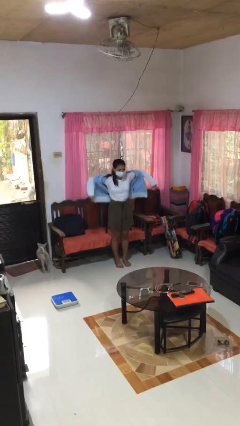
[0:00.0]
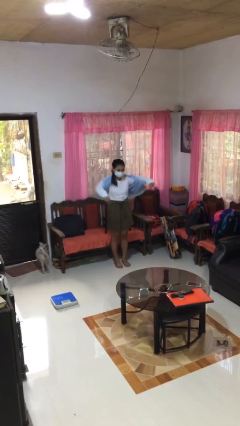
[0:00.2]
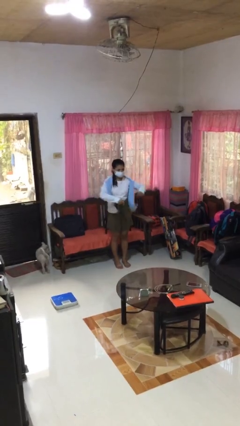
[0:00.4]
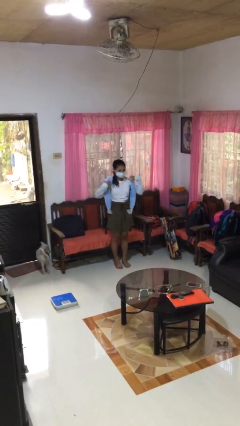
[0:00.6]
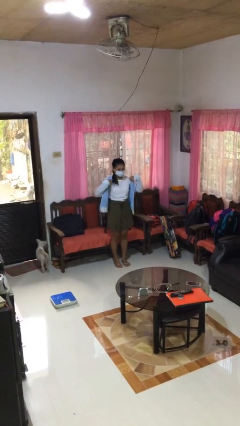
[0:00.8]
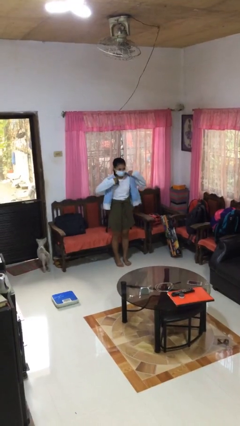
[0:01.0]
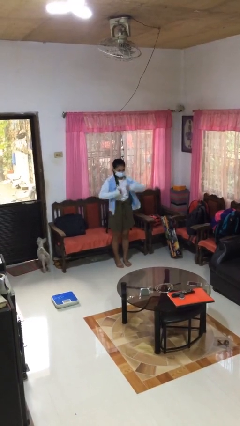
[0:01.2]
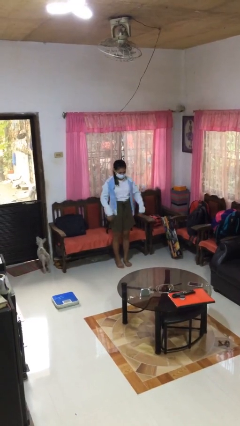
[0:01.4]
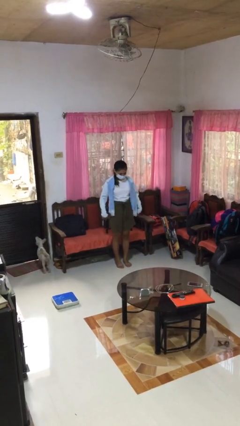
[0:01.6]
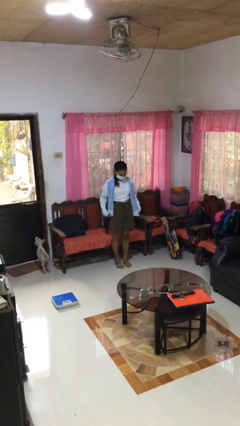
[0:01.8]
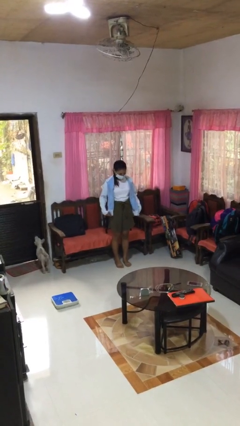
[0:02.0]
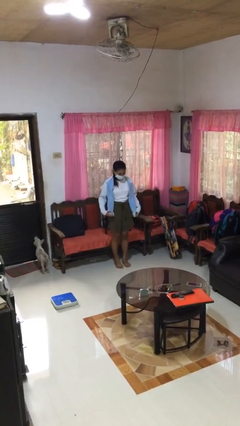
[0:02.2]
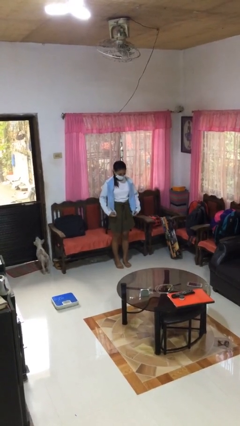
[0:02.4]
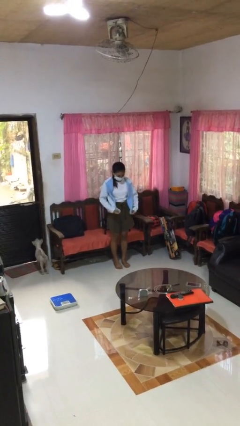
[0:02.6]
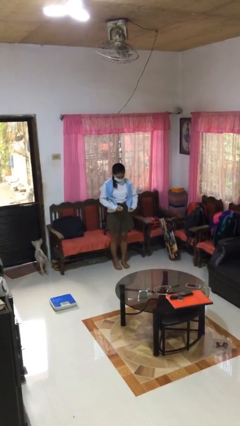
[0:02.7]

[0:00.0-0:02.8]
person puts on jacket

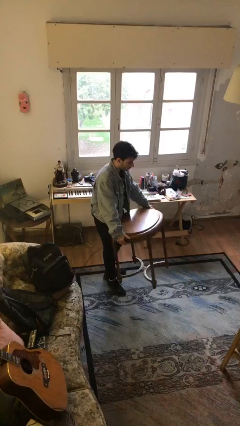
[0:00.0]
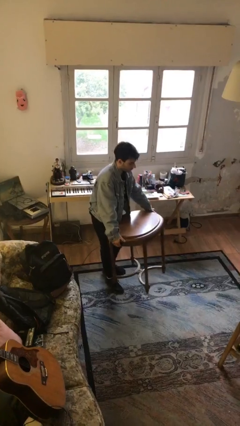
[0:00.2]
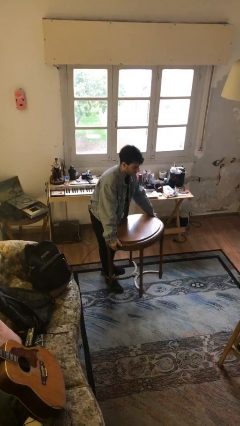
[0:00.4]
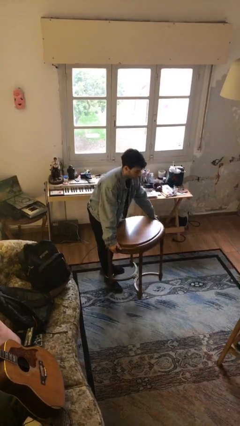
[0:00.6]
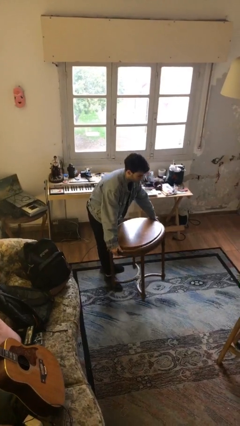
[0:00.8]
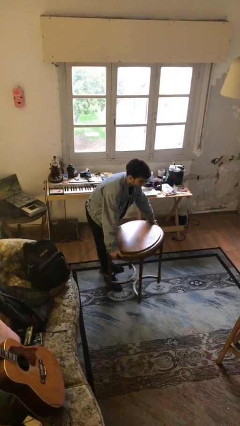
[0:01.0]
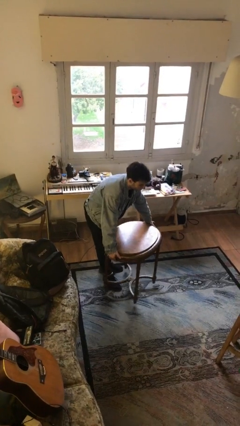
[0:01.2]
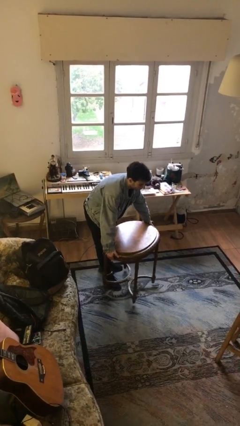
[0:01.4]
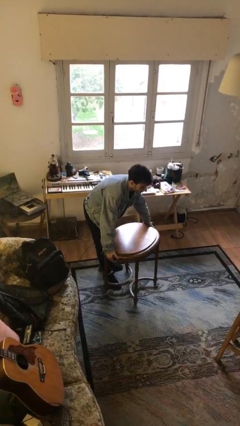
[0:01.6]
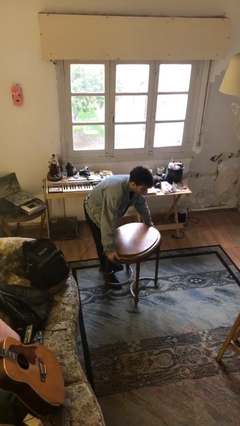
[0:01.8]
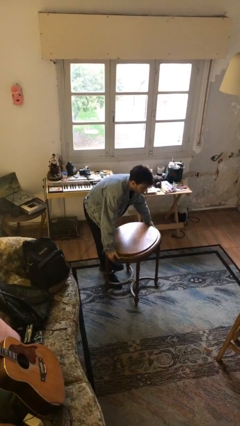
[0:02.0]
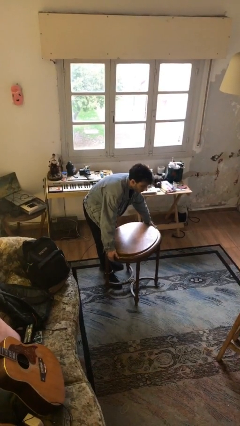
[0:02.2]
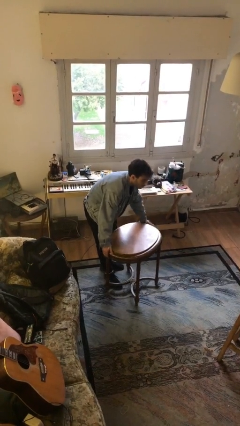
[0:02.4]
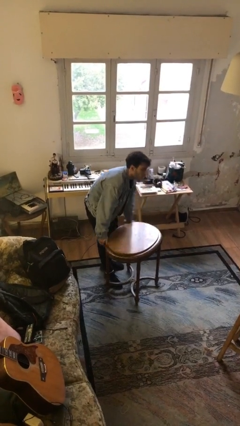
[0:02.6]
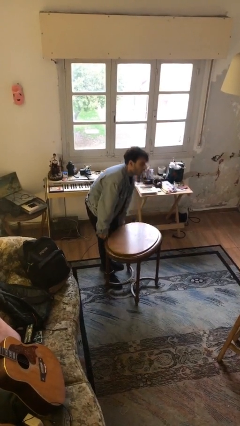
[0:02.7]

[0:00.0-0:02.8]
person puts down object on floor

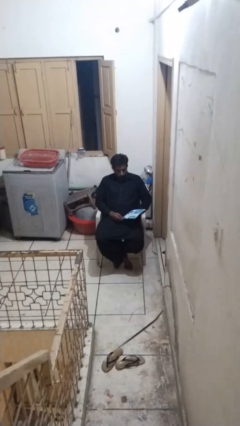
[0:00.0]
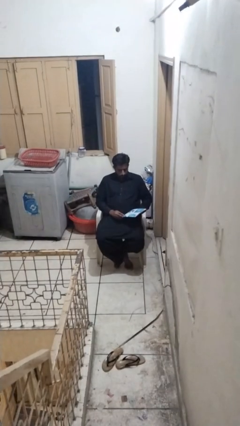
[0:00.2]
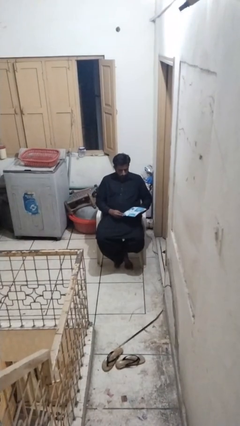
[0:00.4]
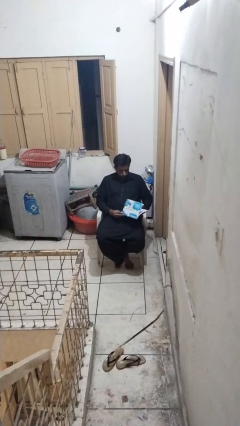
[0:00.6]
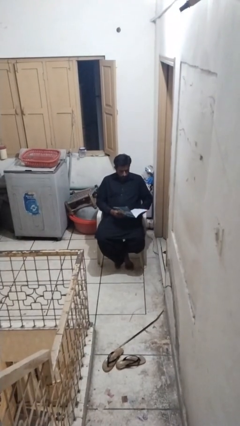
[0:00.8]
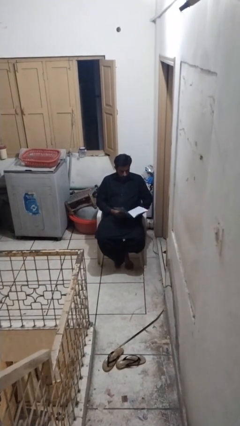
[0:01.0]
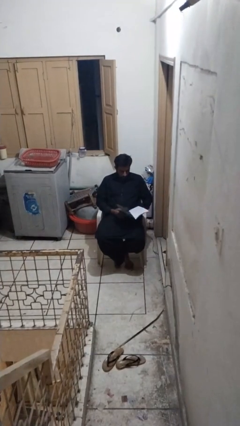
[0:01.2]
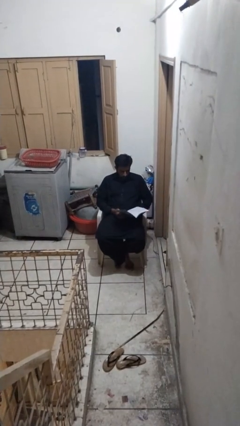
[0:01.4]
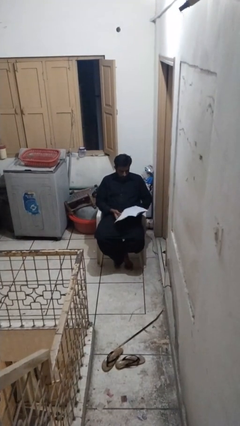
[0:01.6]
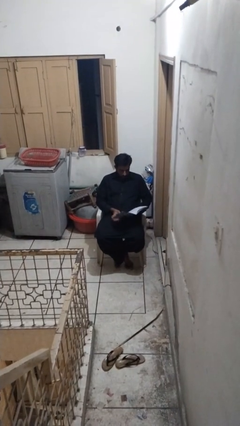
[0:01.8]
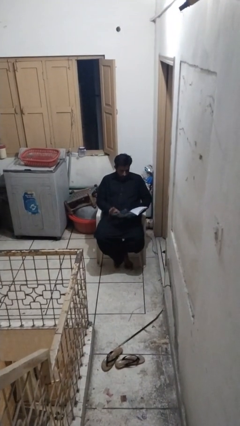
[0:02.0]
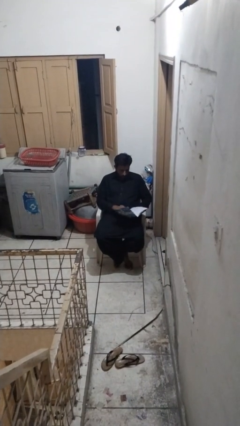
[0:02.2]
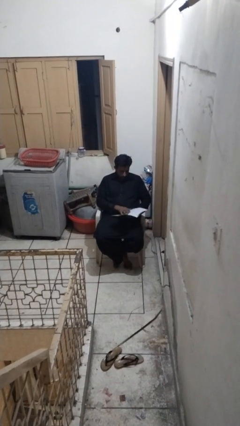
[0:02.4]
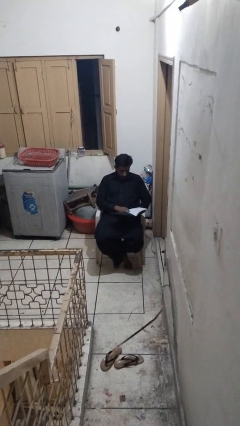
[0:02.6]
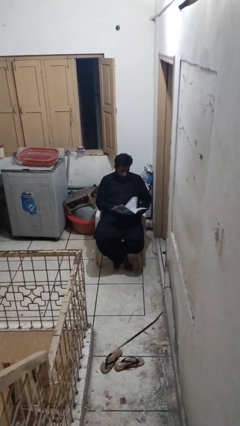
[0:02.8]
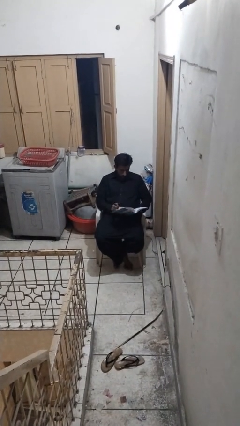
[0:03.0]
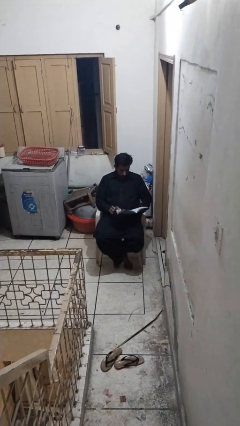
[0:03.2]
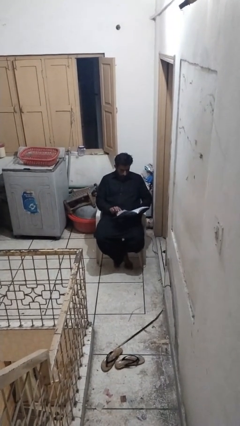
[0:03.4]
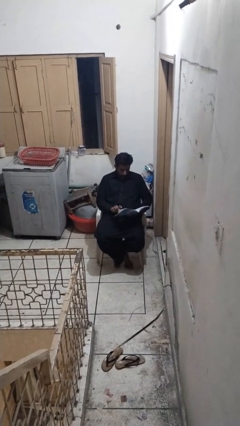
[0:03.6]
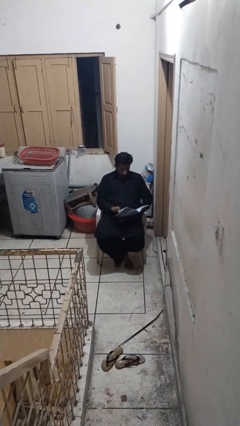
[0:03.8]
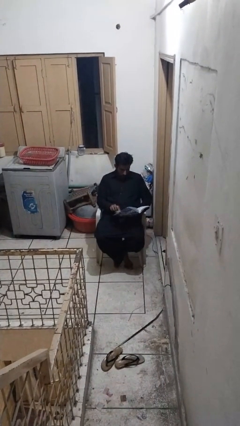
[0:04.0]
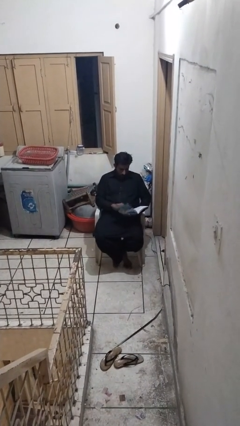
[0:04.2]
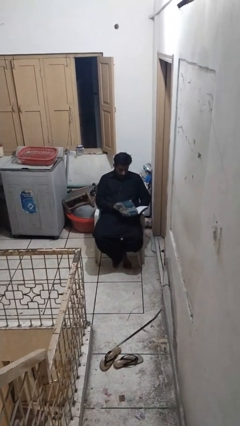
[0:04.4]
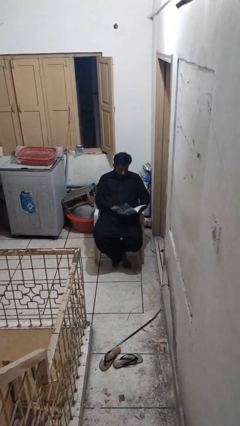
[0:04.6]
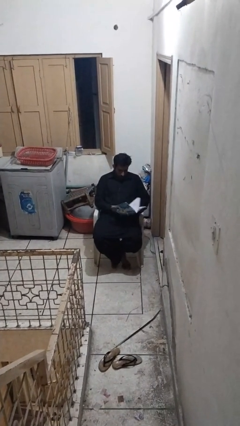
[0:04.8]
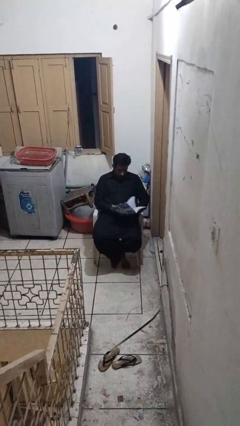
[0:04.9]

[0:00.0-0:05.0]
person reads book

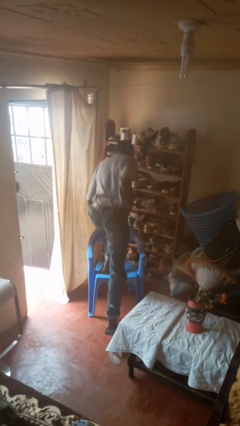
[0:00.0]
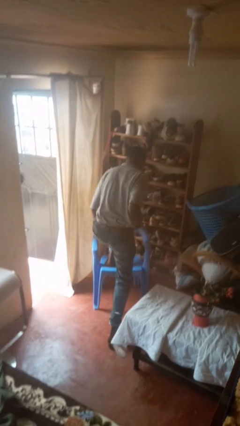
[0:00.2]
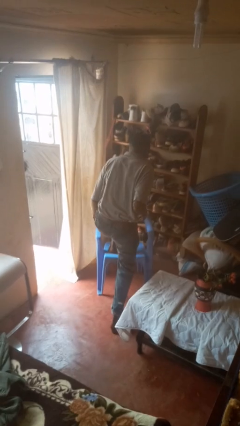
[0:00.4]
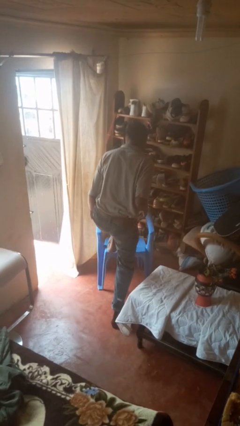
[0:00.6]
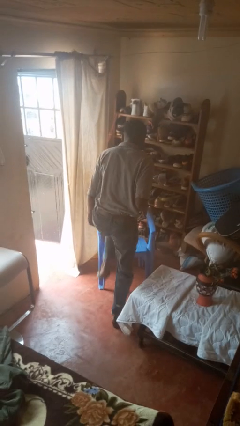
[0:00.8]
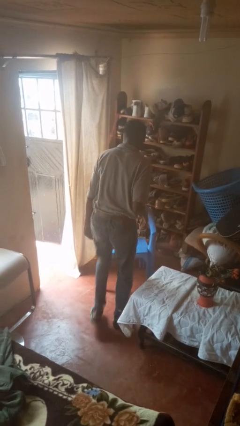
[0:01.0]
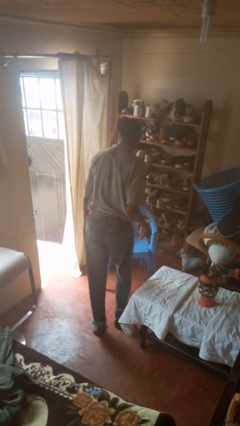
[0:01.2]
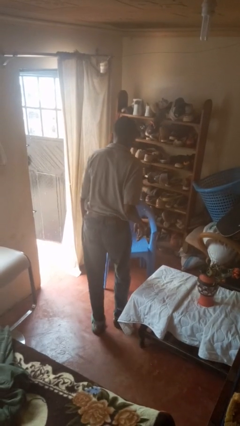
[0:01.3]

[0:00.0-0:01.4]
person climbs off chair

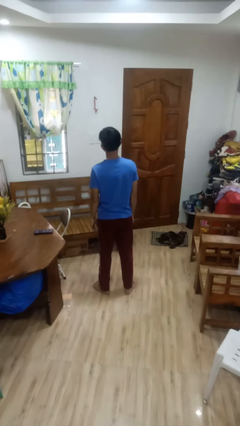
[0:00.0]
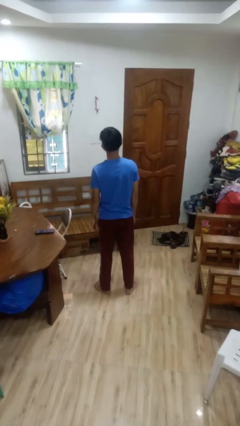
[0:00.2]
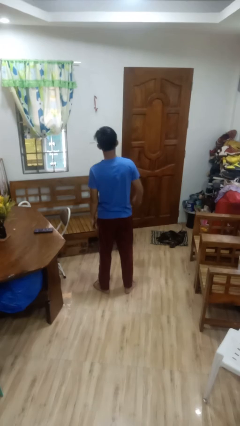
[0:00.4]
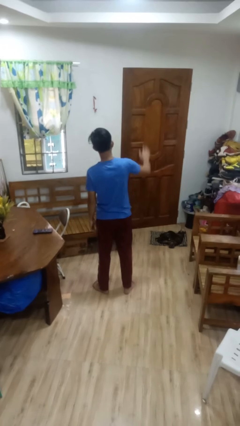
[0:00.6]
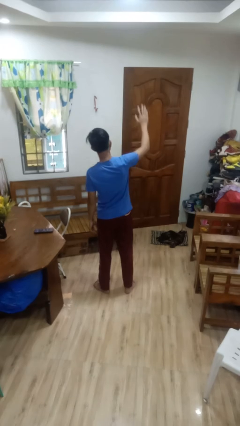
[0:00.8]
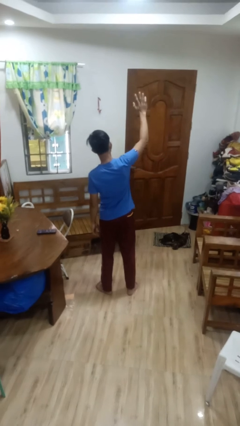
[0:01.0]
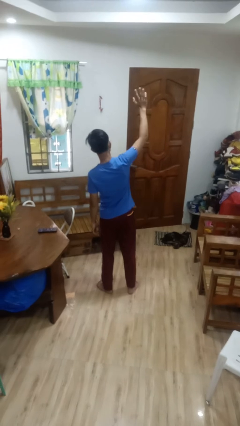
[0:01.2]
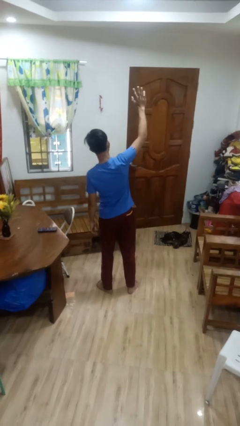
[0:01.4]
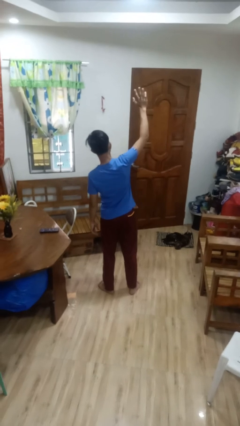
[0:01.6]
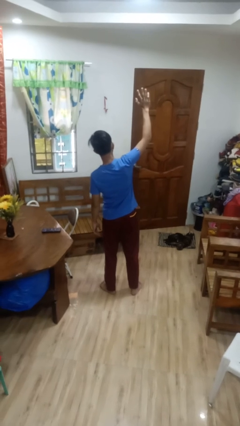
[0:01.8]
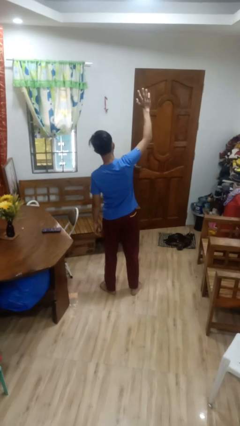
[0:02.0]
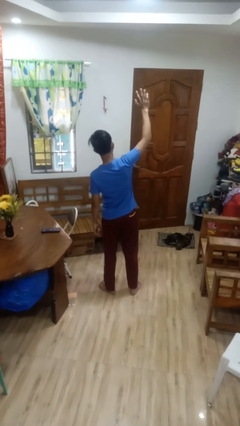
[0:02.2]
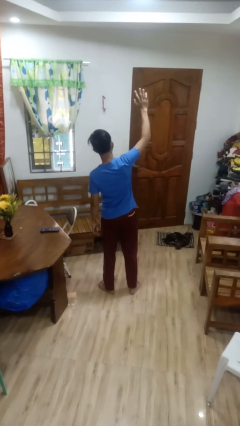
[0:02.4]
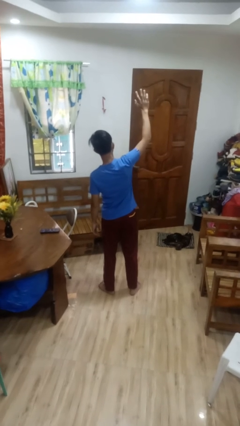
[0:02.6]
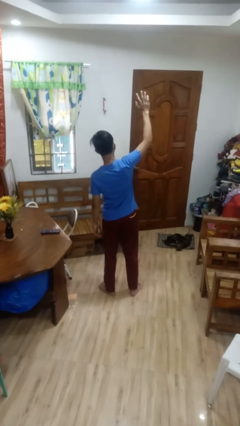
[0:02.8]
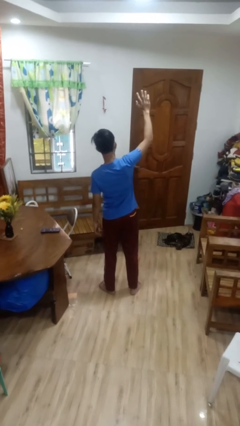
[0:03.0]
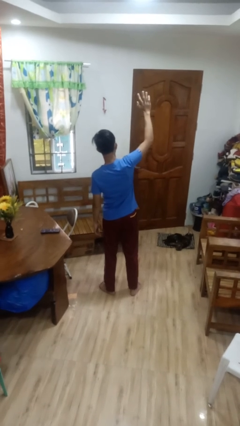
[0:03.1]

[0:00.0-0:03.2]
person gestures raise hand

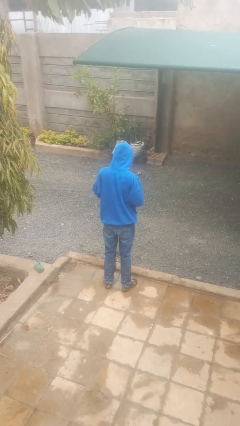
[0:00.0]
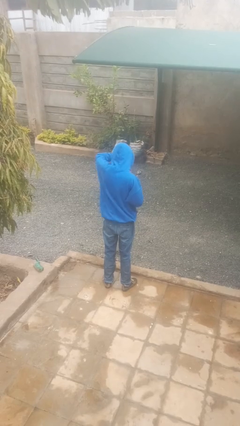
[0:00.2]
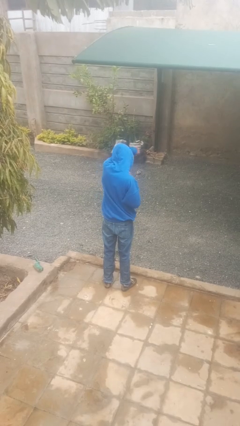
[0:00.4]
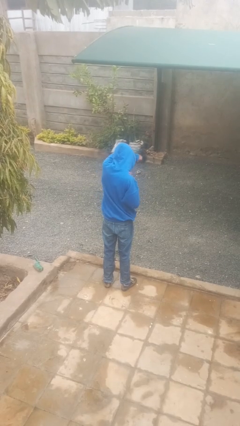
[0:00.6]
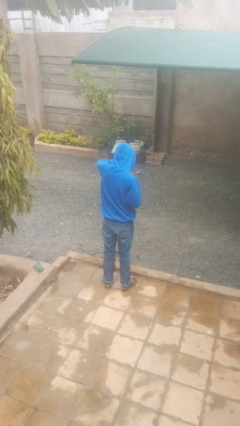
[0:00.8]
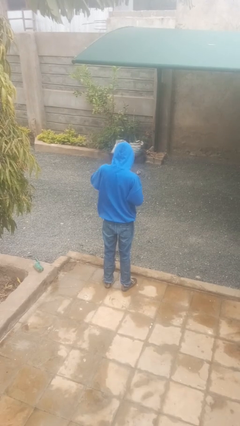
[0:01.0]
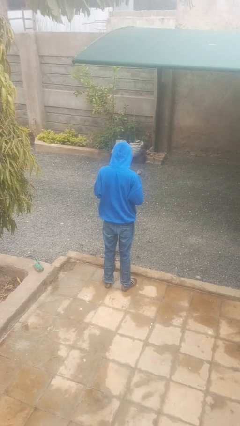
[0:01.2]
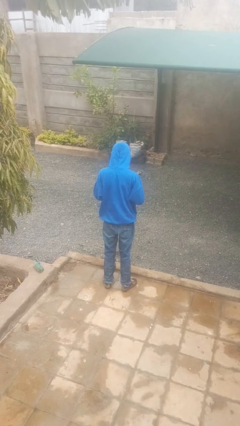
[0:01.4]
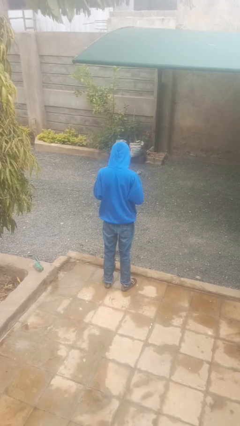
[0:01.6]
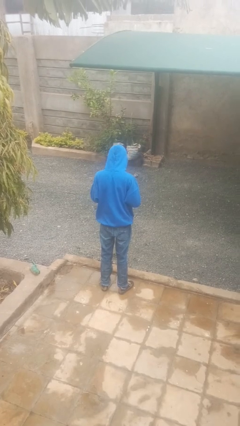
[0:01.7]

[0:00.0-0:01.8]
person punches

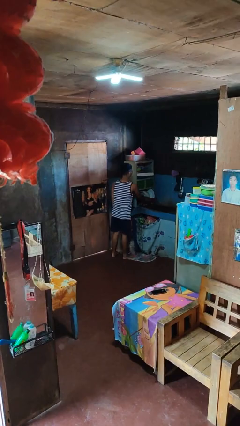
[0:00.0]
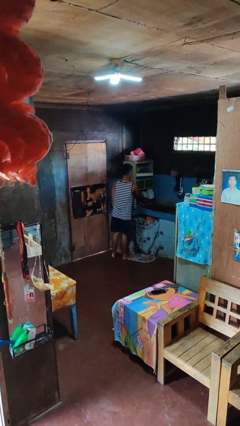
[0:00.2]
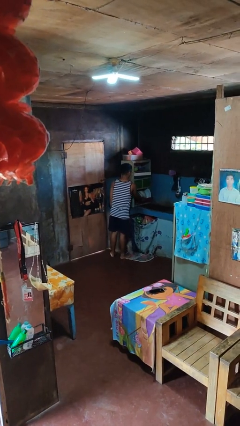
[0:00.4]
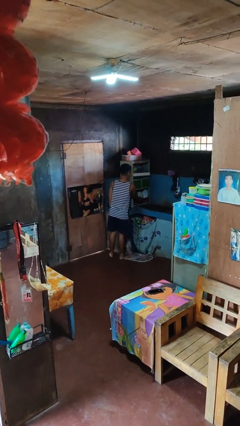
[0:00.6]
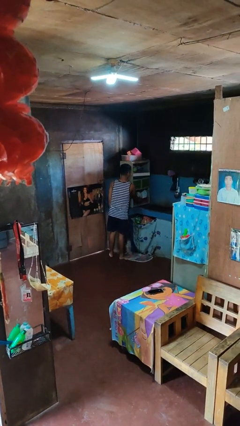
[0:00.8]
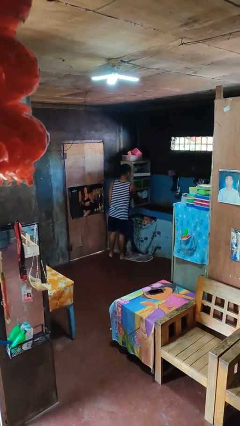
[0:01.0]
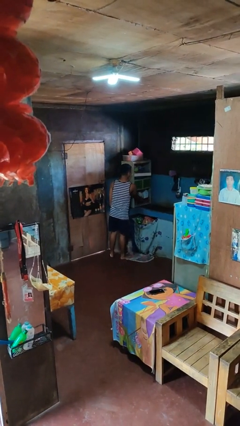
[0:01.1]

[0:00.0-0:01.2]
person closes dishwasher
